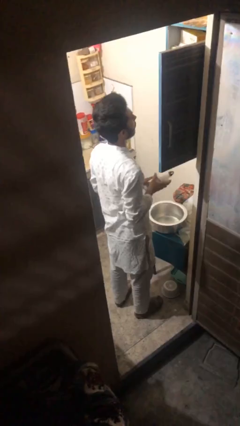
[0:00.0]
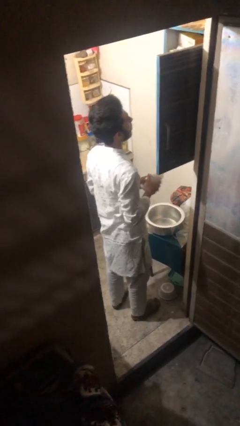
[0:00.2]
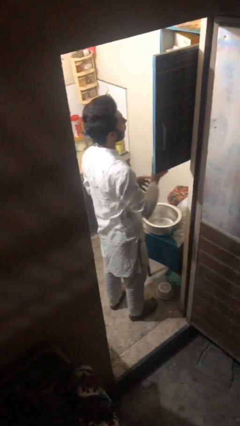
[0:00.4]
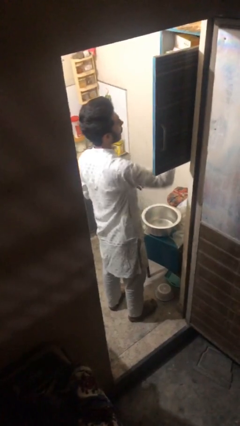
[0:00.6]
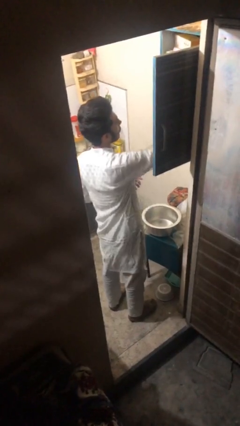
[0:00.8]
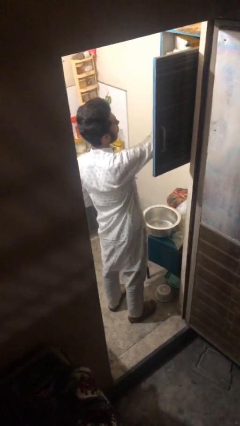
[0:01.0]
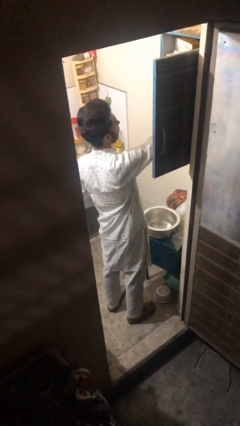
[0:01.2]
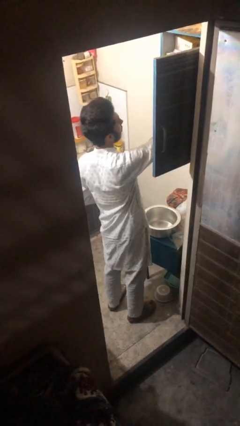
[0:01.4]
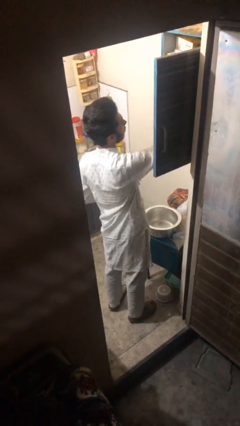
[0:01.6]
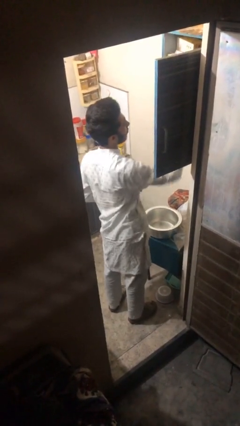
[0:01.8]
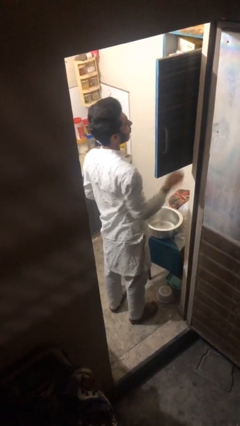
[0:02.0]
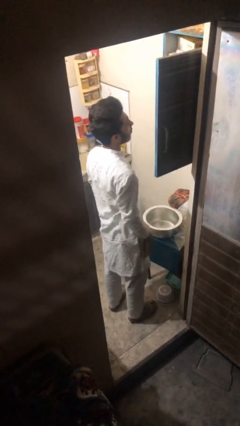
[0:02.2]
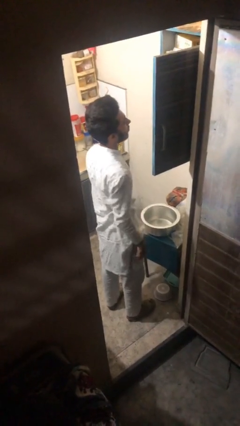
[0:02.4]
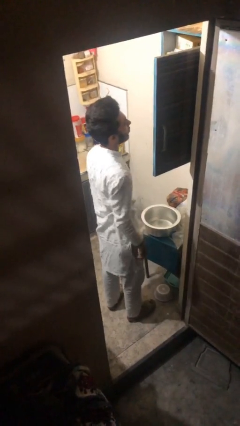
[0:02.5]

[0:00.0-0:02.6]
person puts object in cabinet

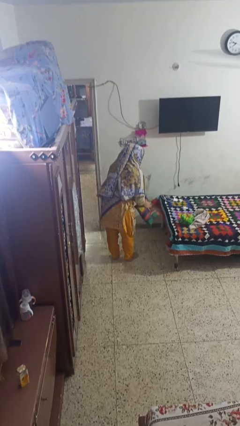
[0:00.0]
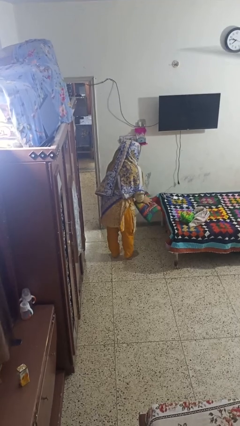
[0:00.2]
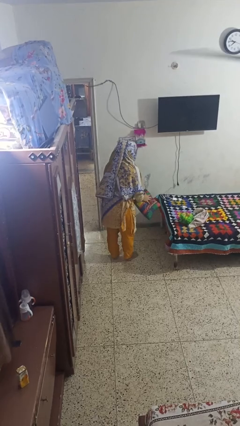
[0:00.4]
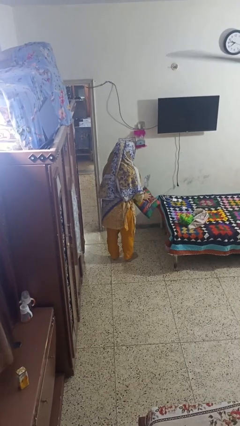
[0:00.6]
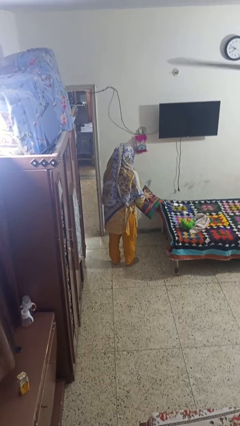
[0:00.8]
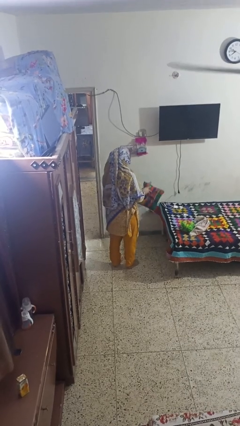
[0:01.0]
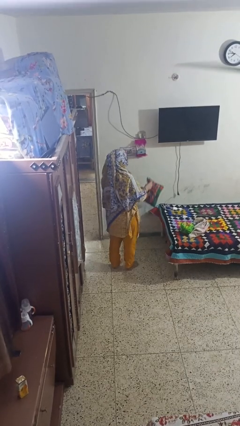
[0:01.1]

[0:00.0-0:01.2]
person catches dropped object

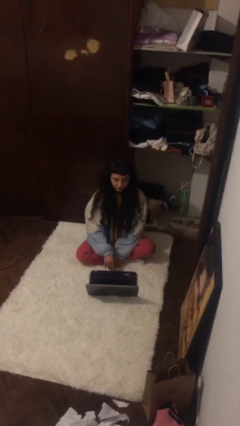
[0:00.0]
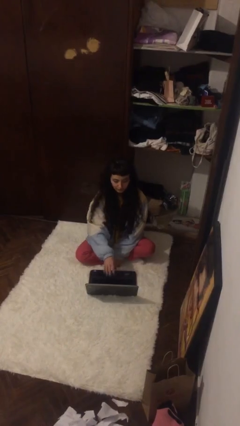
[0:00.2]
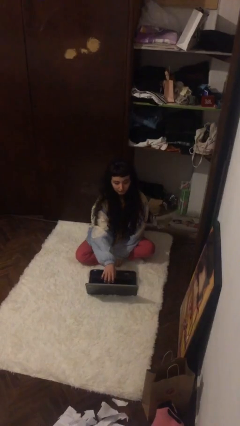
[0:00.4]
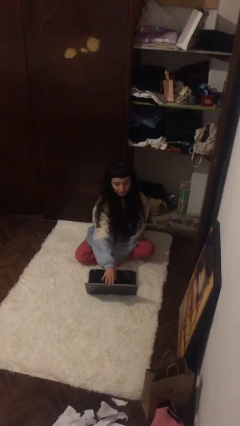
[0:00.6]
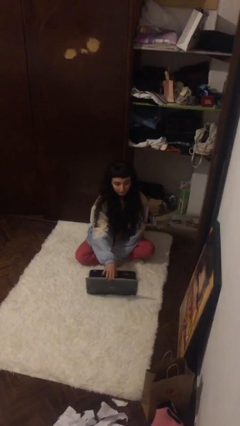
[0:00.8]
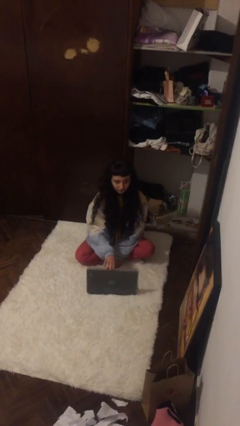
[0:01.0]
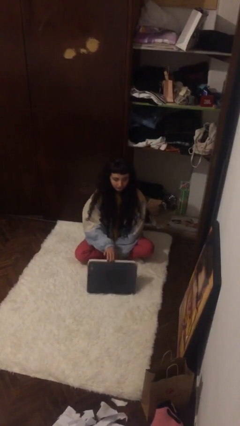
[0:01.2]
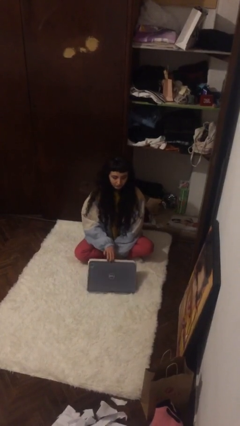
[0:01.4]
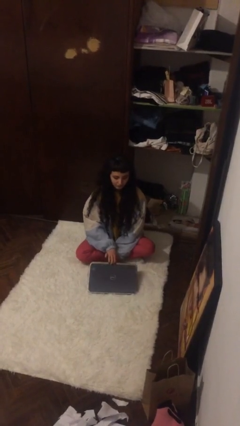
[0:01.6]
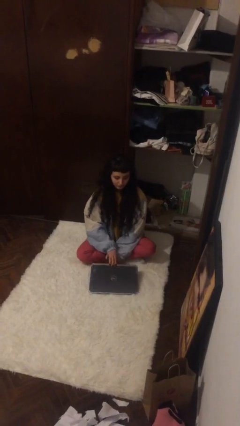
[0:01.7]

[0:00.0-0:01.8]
person closes laptop

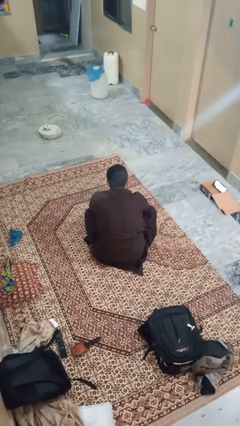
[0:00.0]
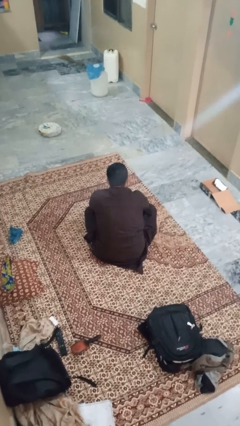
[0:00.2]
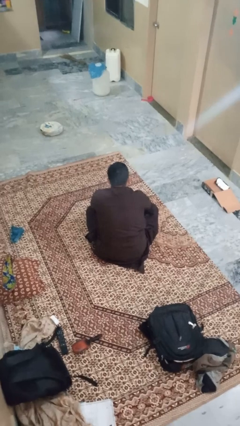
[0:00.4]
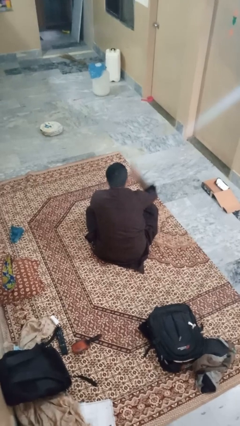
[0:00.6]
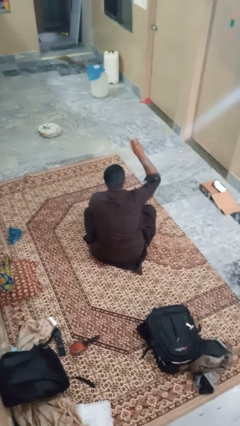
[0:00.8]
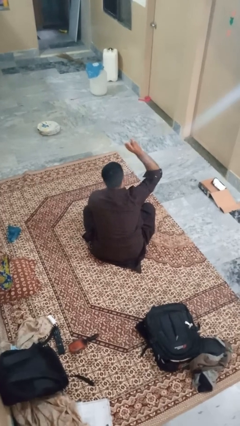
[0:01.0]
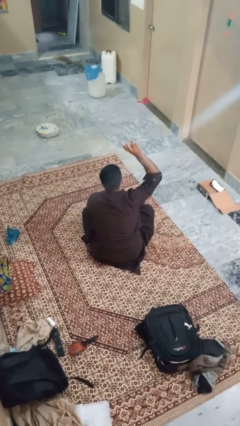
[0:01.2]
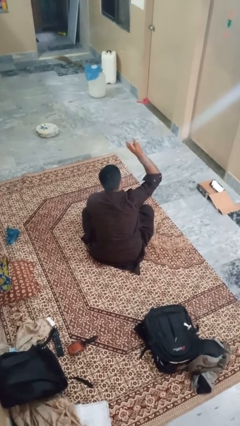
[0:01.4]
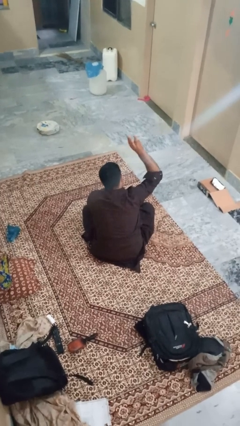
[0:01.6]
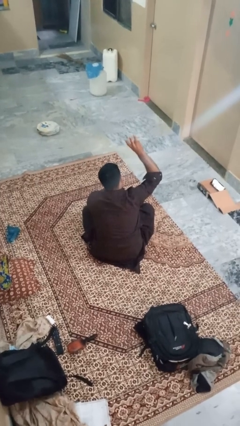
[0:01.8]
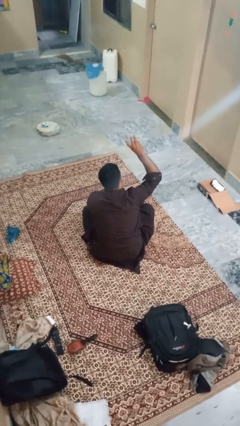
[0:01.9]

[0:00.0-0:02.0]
person gestures number three

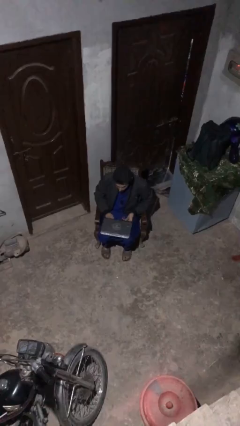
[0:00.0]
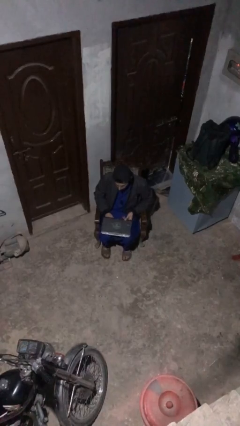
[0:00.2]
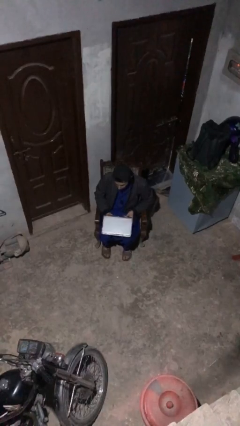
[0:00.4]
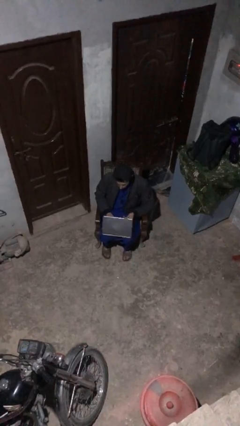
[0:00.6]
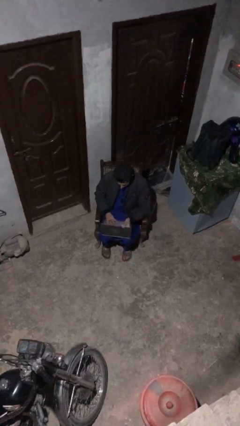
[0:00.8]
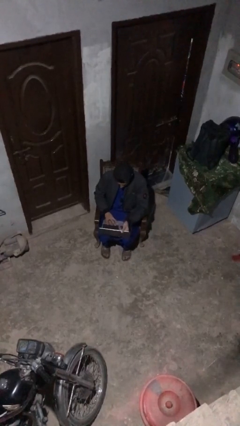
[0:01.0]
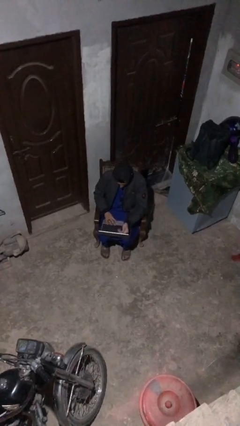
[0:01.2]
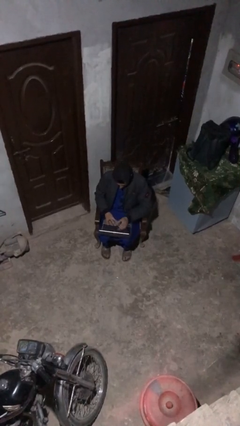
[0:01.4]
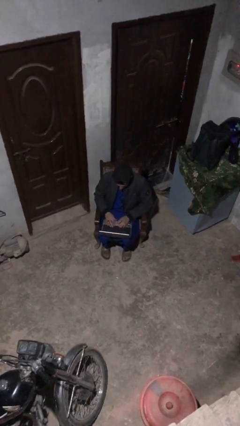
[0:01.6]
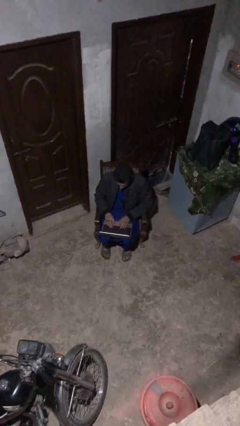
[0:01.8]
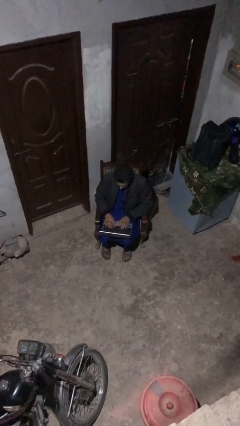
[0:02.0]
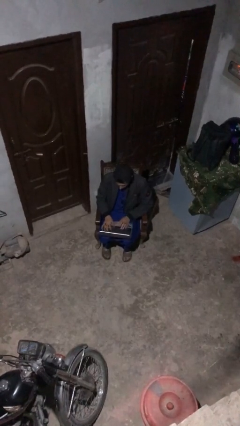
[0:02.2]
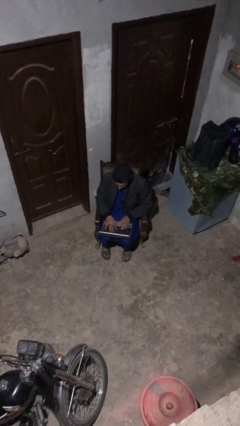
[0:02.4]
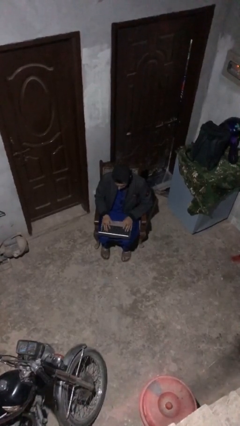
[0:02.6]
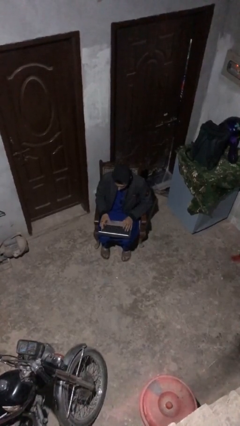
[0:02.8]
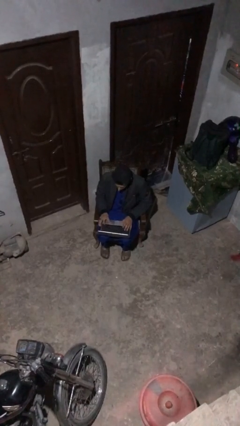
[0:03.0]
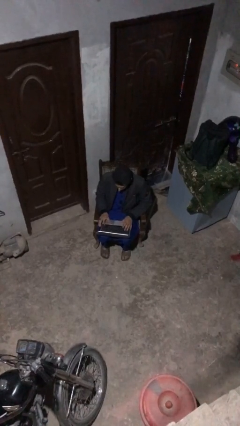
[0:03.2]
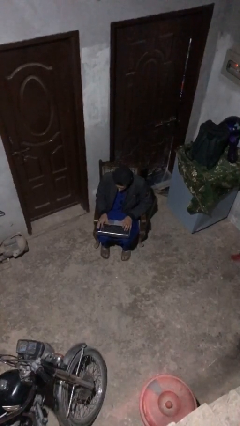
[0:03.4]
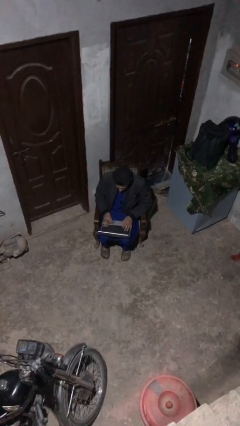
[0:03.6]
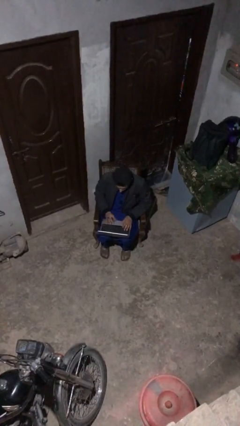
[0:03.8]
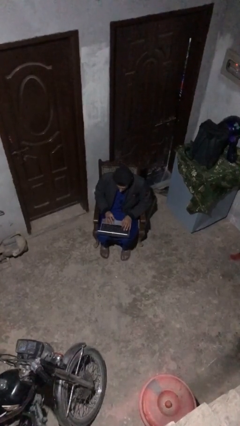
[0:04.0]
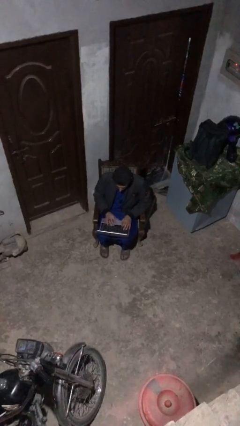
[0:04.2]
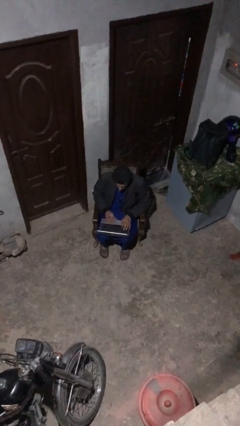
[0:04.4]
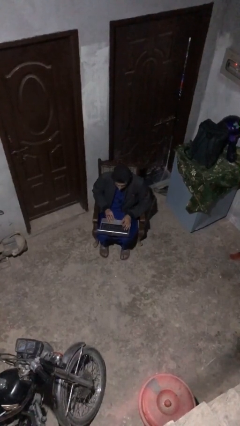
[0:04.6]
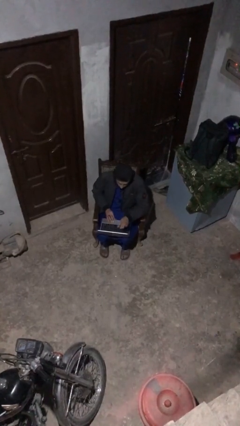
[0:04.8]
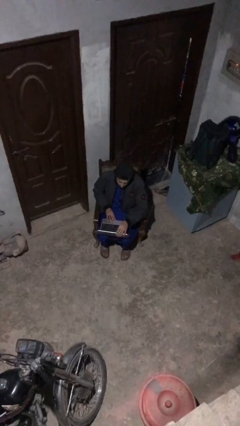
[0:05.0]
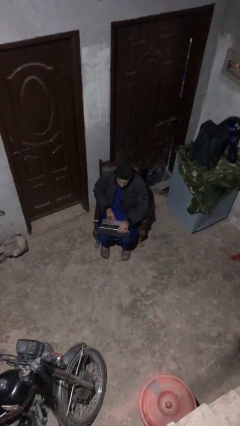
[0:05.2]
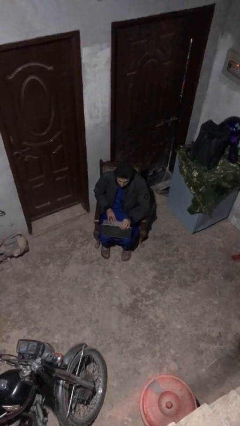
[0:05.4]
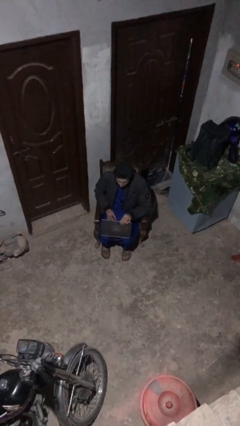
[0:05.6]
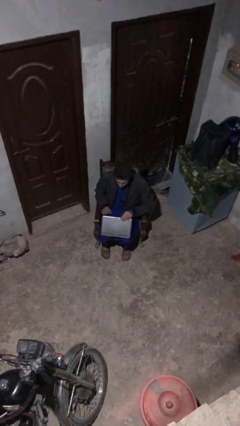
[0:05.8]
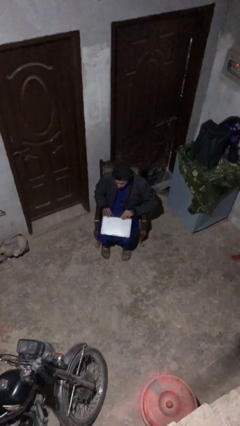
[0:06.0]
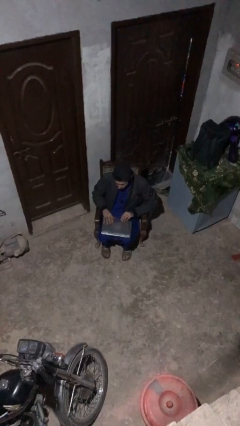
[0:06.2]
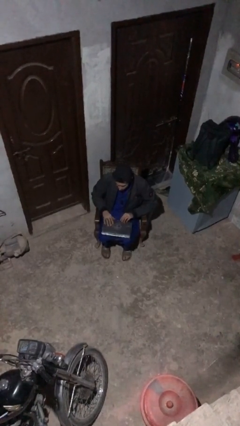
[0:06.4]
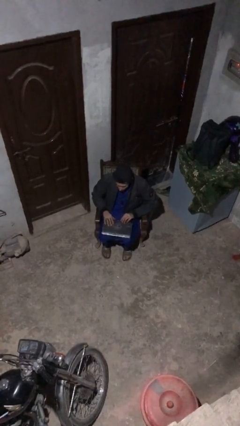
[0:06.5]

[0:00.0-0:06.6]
person interacts with laptop

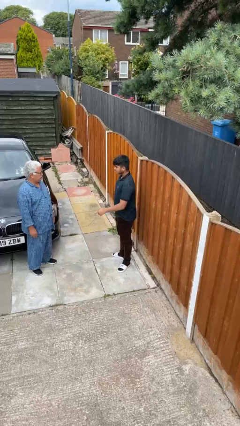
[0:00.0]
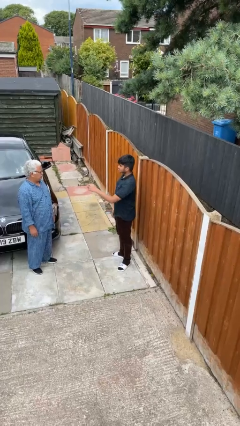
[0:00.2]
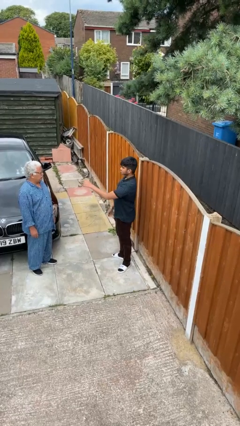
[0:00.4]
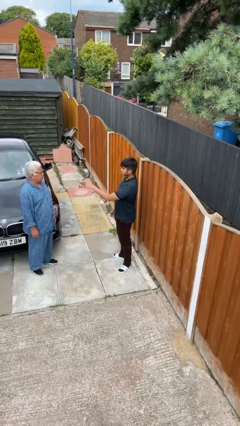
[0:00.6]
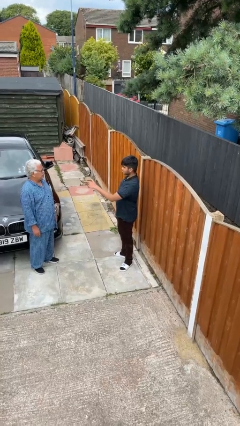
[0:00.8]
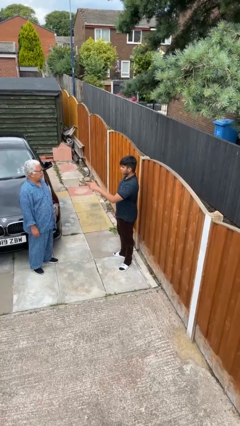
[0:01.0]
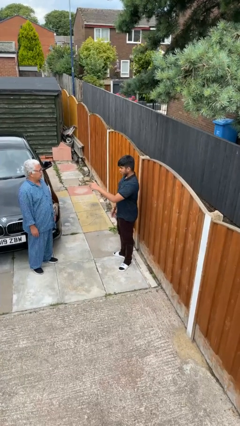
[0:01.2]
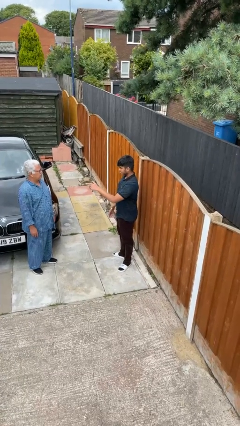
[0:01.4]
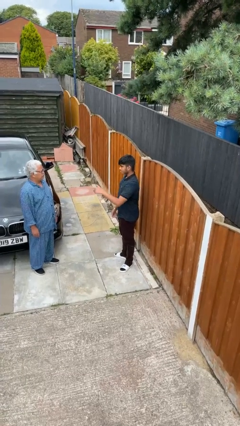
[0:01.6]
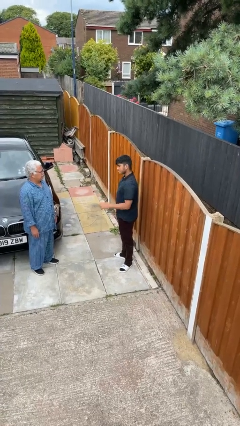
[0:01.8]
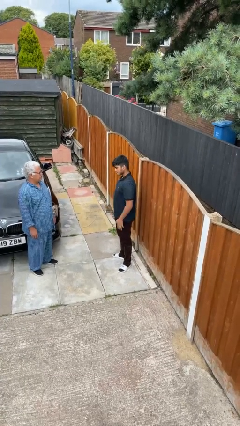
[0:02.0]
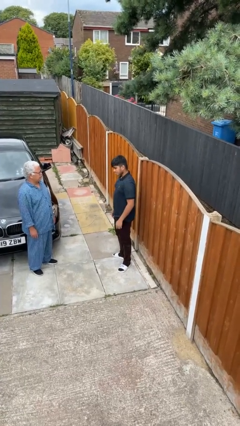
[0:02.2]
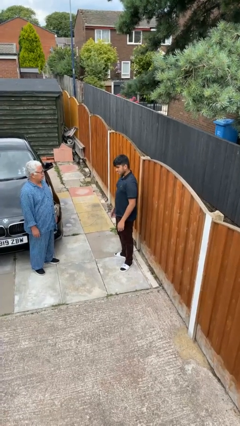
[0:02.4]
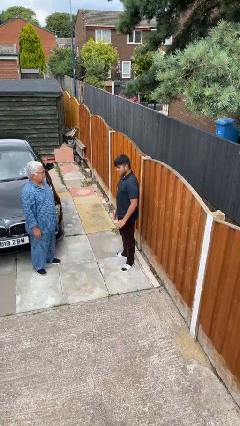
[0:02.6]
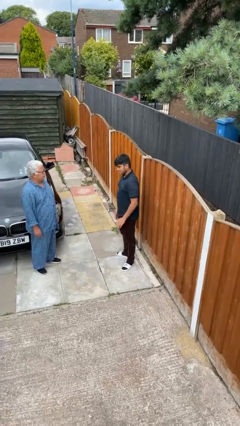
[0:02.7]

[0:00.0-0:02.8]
person points at person
